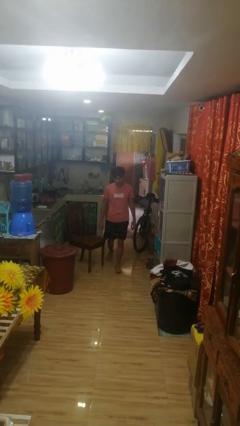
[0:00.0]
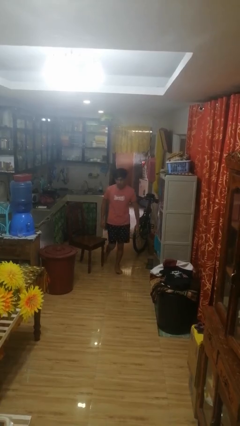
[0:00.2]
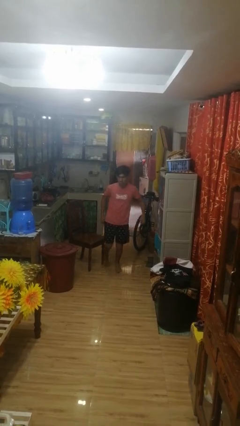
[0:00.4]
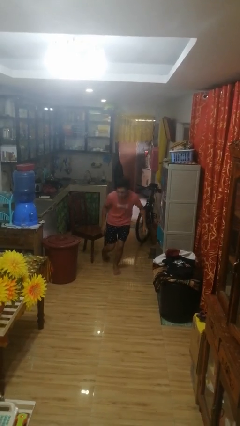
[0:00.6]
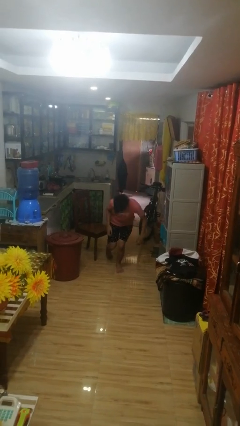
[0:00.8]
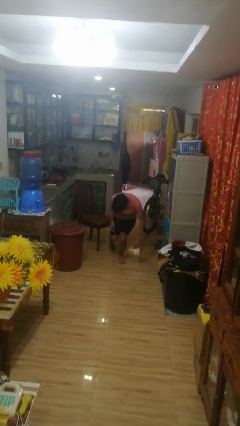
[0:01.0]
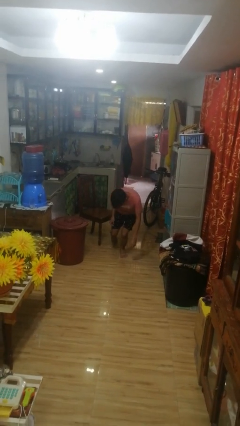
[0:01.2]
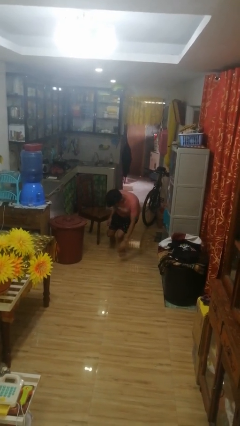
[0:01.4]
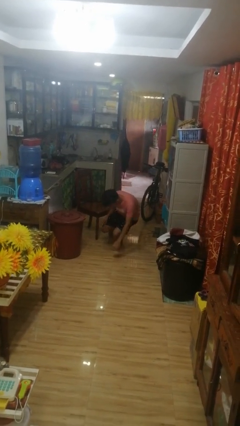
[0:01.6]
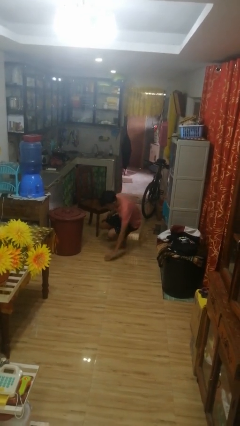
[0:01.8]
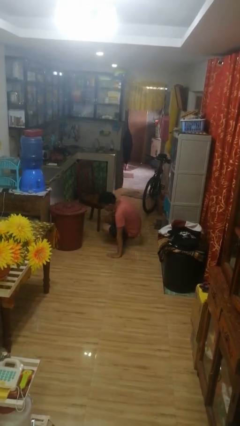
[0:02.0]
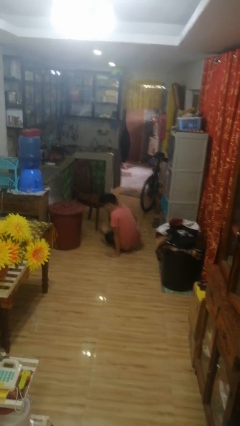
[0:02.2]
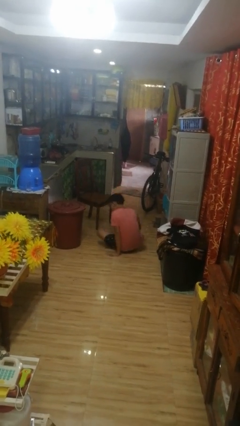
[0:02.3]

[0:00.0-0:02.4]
person trips on object on floor

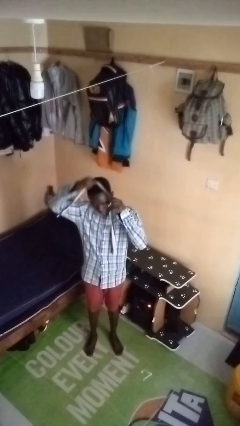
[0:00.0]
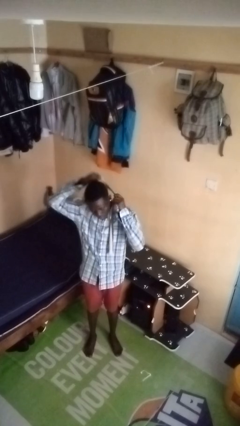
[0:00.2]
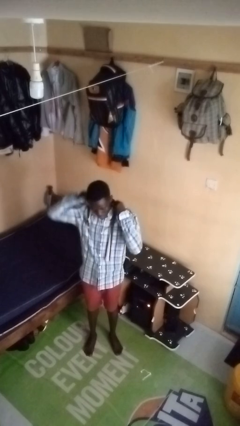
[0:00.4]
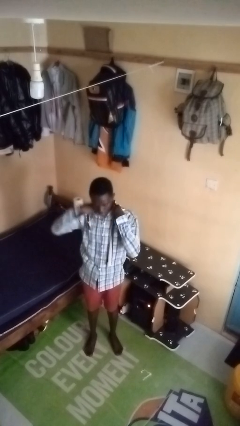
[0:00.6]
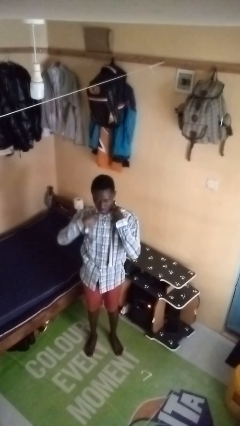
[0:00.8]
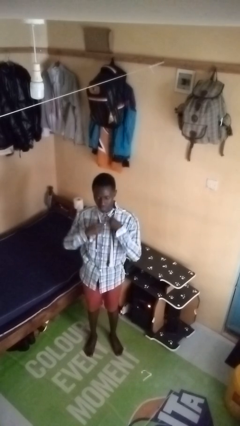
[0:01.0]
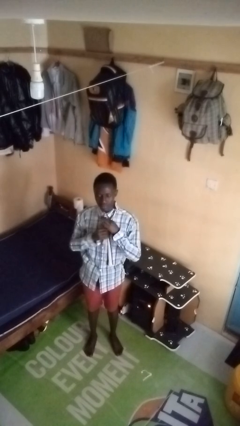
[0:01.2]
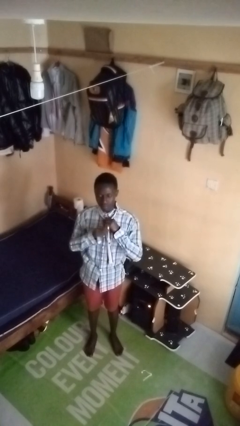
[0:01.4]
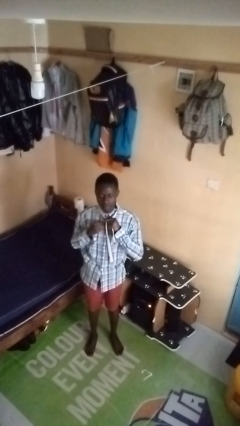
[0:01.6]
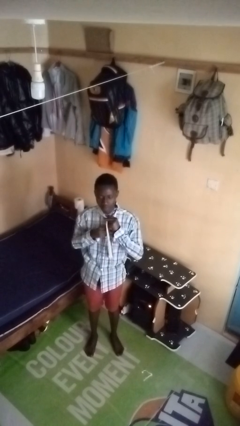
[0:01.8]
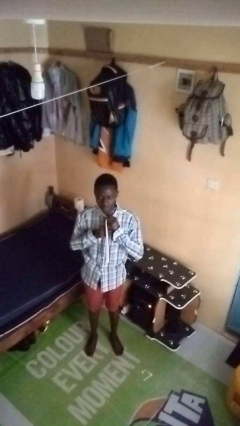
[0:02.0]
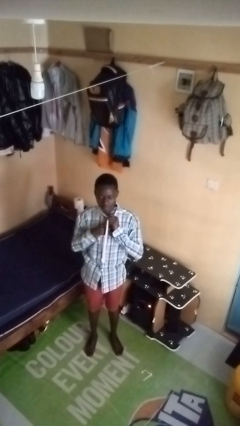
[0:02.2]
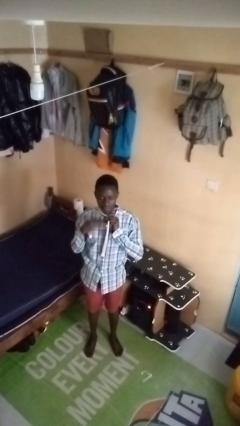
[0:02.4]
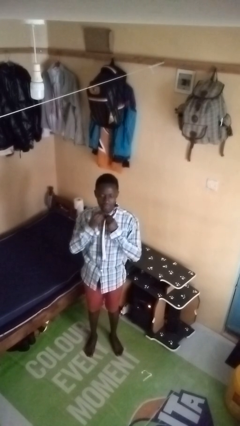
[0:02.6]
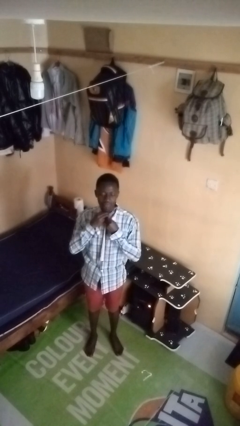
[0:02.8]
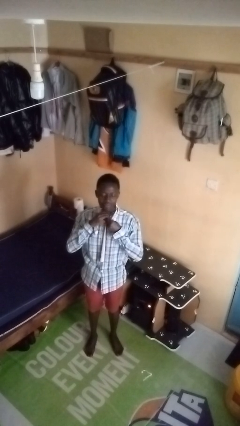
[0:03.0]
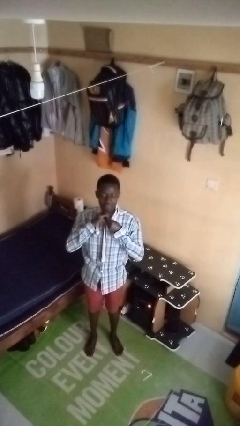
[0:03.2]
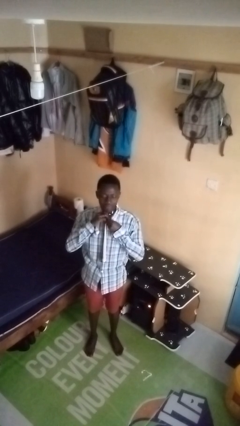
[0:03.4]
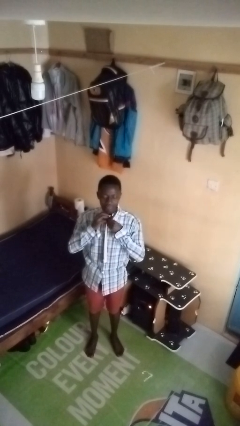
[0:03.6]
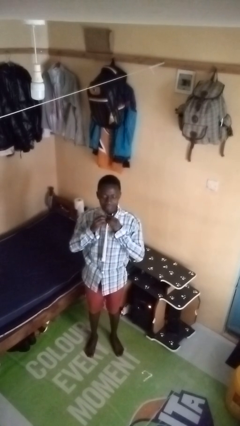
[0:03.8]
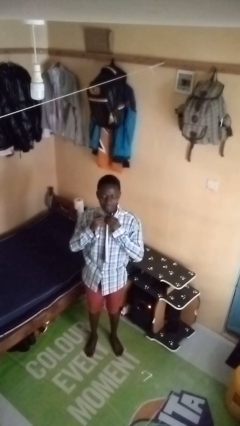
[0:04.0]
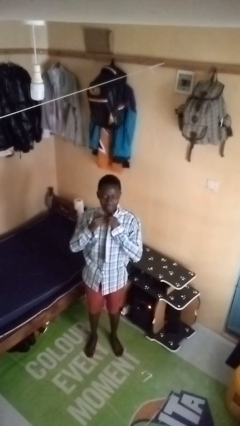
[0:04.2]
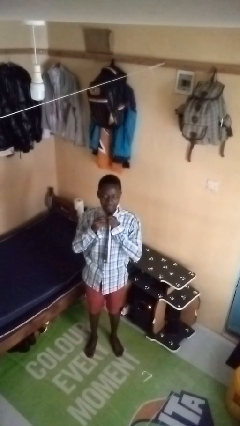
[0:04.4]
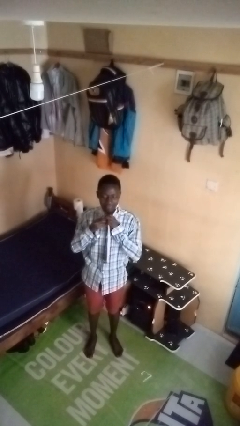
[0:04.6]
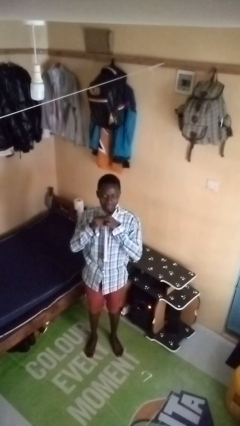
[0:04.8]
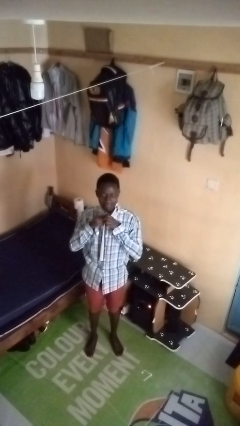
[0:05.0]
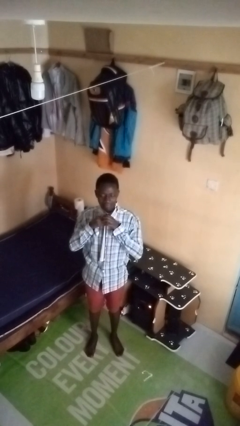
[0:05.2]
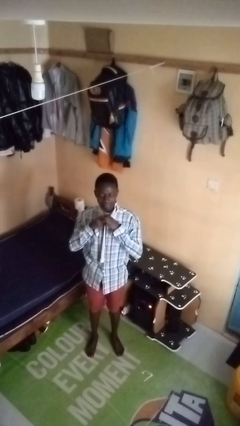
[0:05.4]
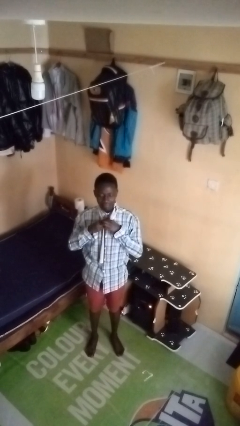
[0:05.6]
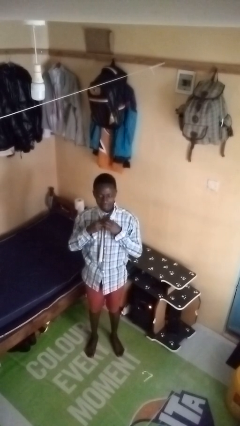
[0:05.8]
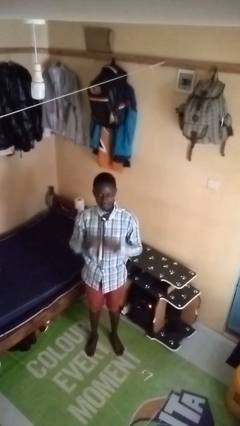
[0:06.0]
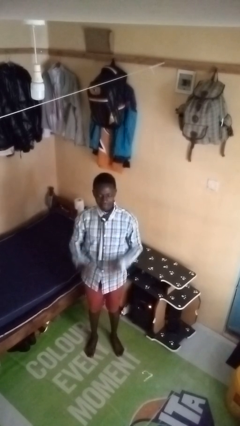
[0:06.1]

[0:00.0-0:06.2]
person puts on necktie

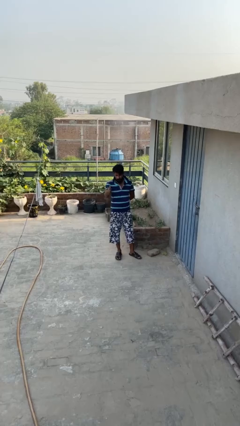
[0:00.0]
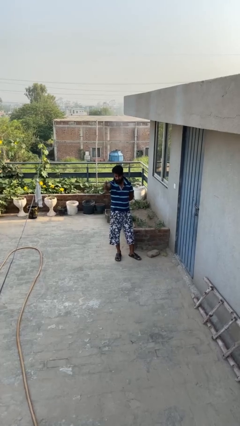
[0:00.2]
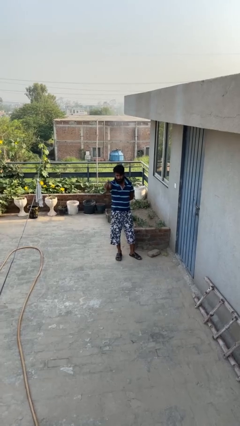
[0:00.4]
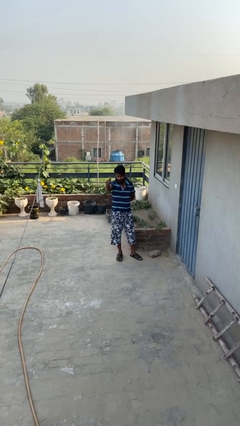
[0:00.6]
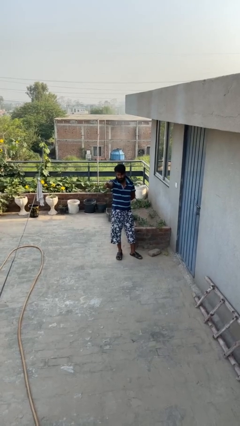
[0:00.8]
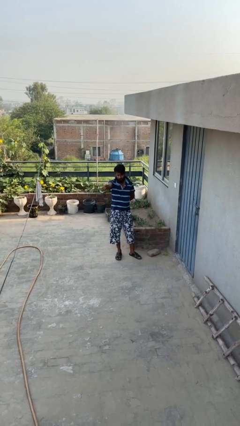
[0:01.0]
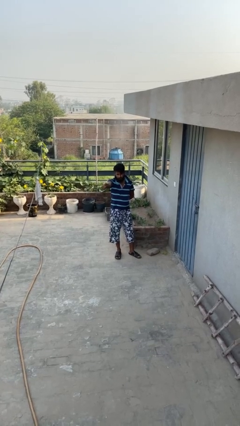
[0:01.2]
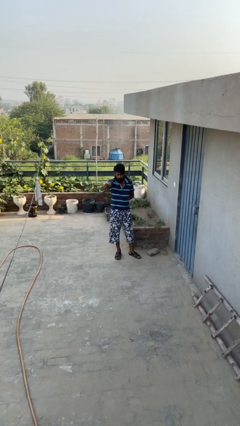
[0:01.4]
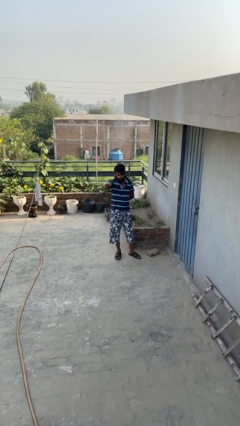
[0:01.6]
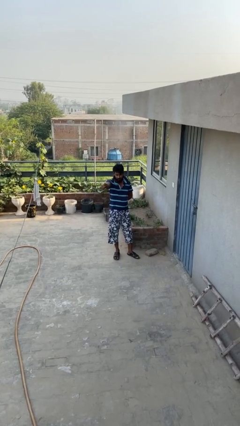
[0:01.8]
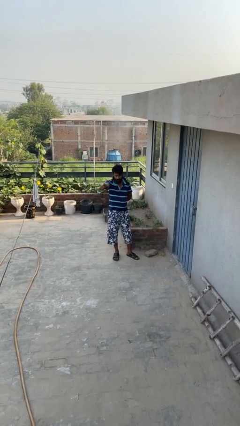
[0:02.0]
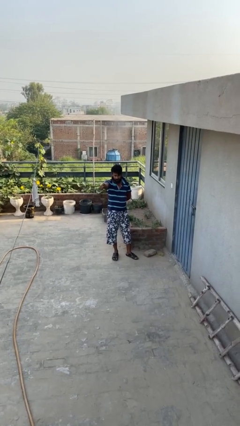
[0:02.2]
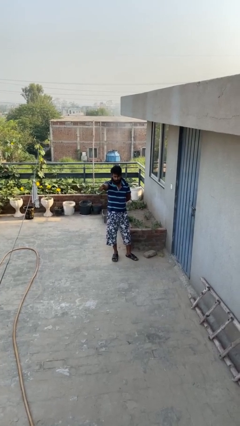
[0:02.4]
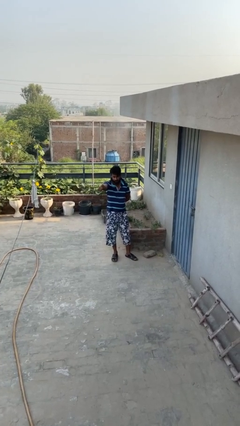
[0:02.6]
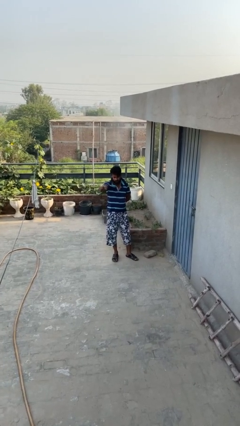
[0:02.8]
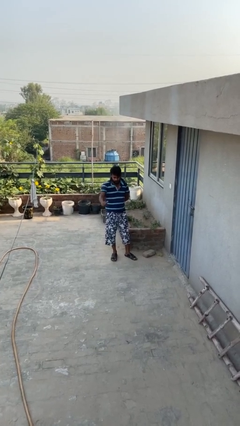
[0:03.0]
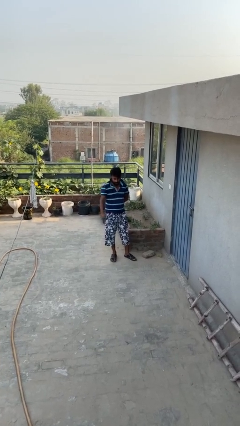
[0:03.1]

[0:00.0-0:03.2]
person gestures thumbs up

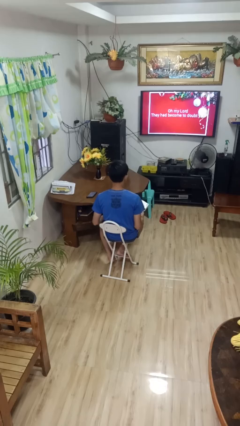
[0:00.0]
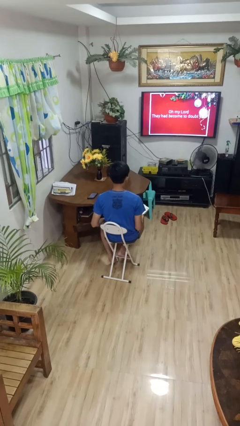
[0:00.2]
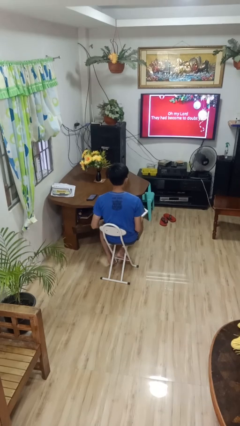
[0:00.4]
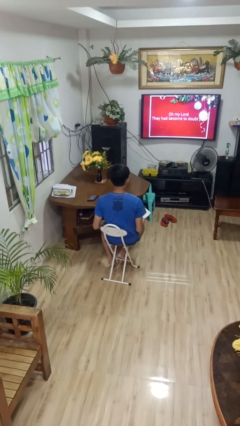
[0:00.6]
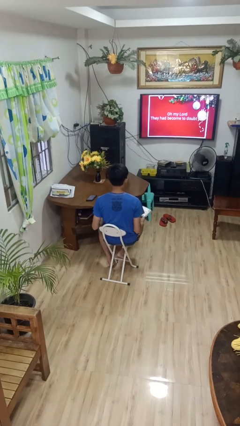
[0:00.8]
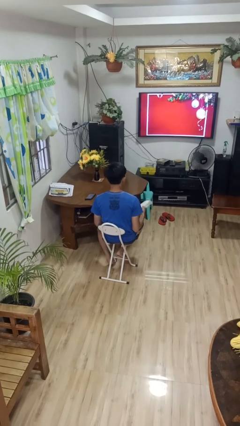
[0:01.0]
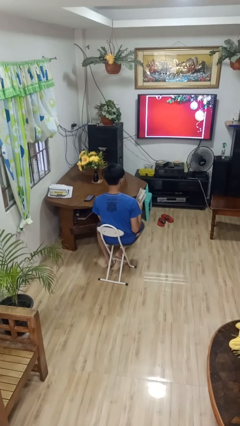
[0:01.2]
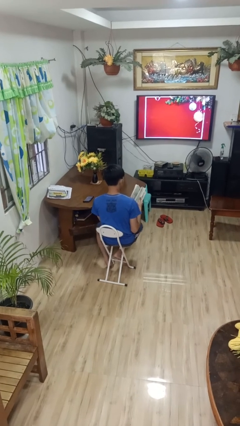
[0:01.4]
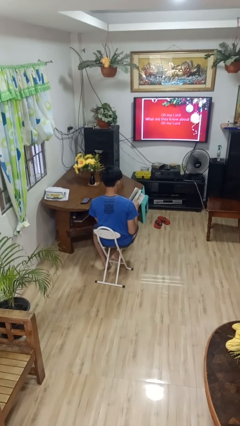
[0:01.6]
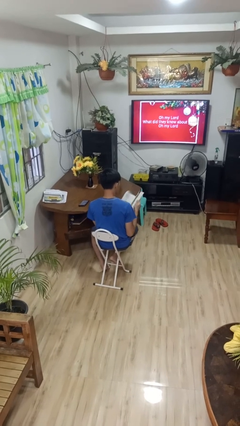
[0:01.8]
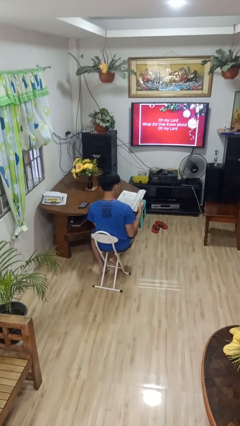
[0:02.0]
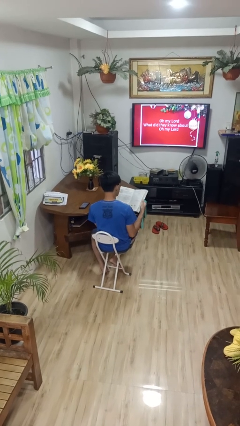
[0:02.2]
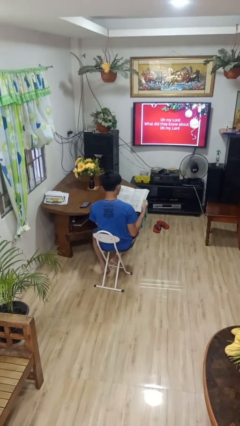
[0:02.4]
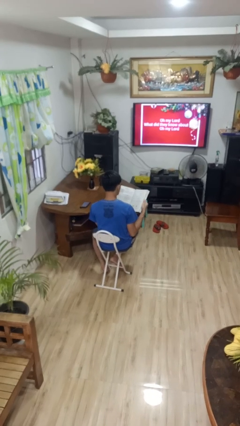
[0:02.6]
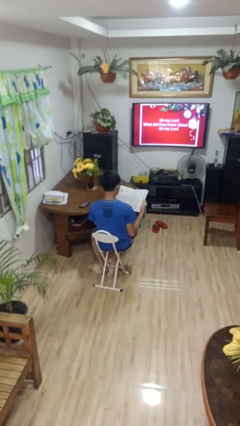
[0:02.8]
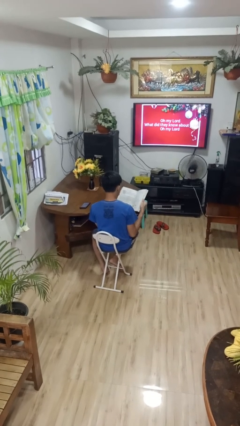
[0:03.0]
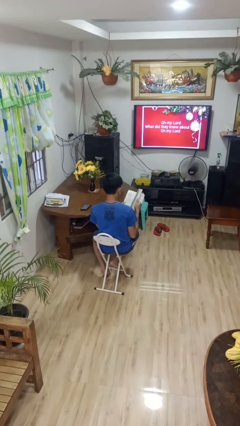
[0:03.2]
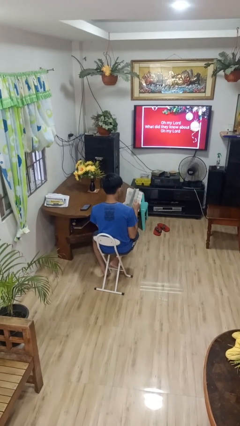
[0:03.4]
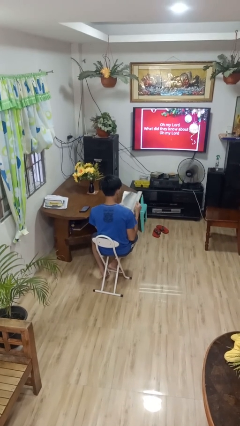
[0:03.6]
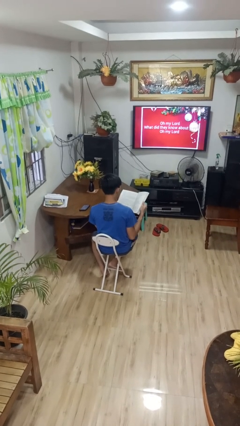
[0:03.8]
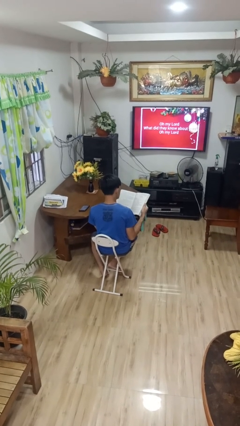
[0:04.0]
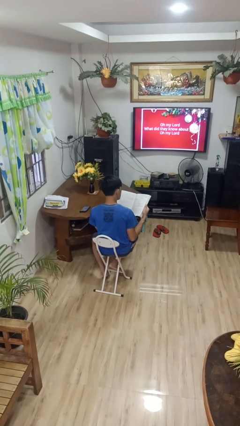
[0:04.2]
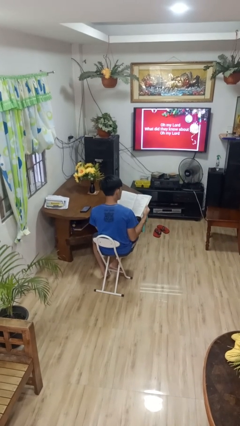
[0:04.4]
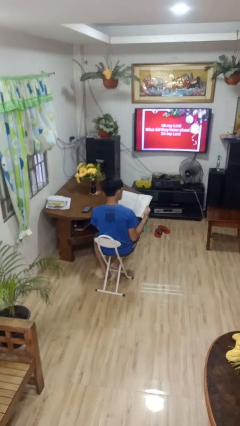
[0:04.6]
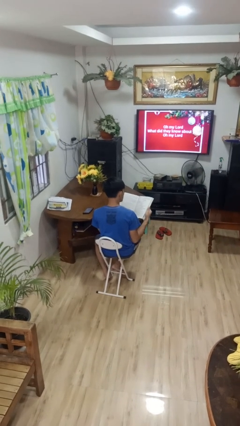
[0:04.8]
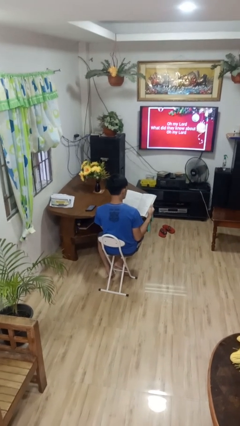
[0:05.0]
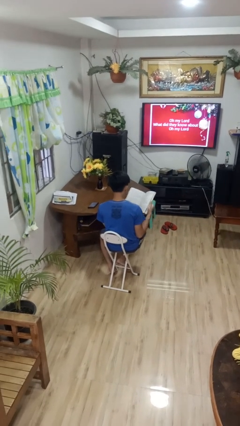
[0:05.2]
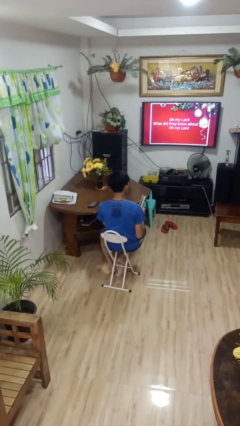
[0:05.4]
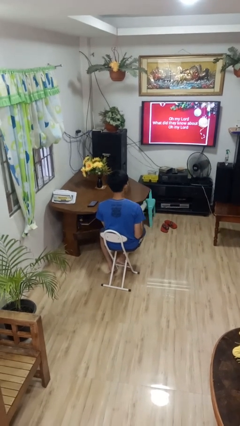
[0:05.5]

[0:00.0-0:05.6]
person reads book
